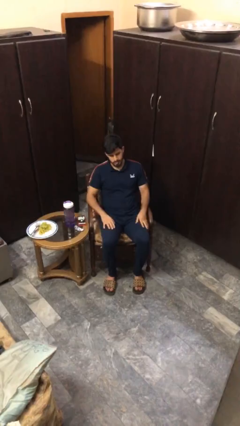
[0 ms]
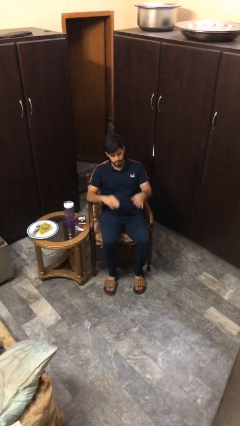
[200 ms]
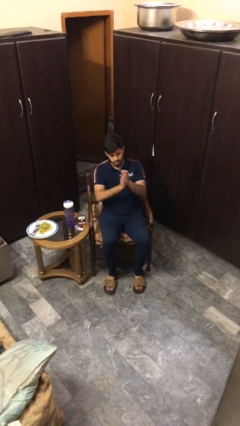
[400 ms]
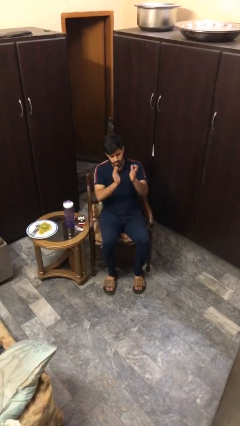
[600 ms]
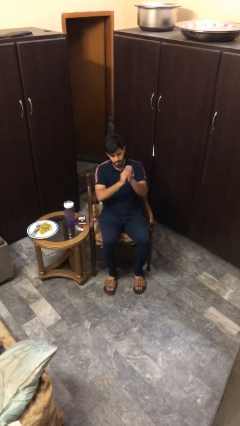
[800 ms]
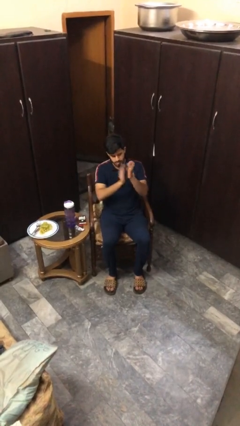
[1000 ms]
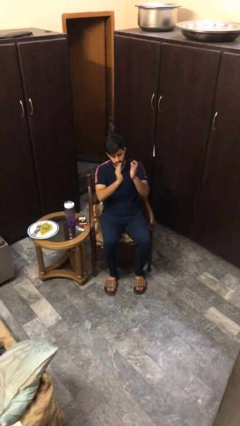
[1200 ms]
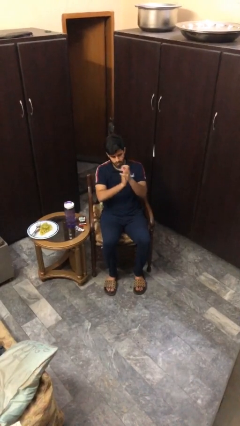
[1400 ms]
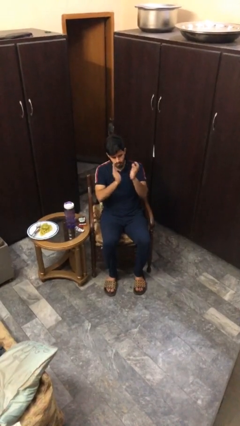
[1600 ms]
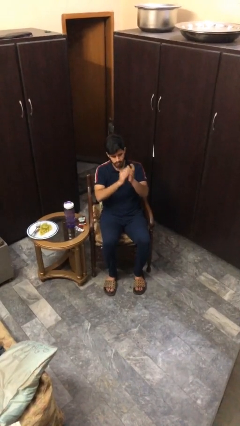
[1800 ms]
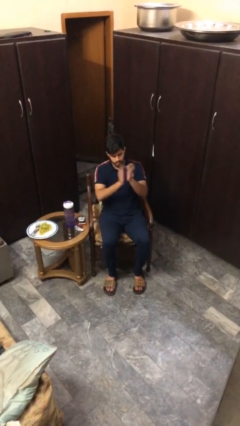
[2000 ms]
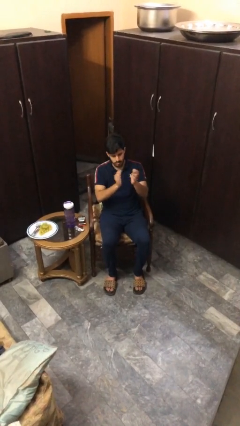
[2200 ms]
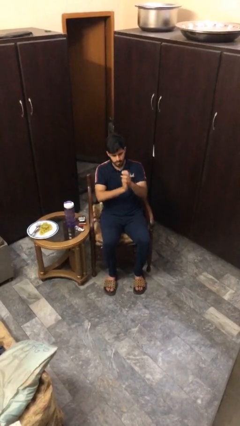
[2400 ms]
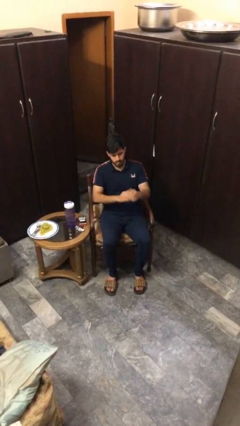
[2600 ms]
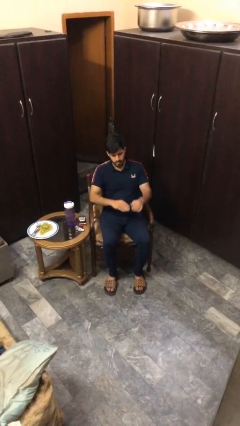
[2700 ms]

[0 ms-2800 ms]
person claps hands

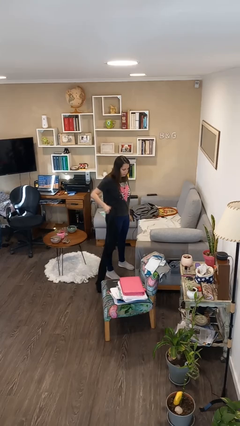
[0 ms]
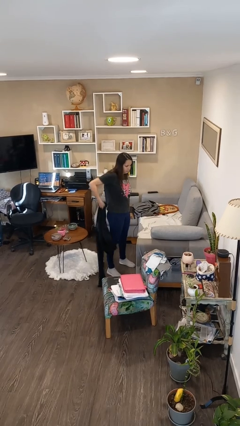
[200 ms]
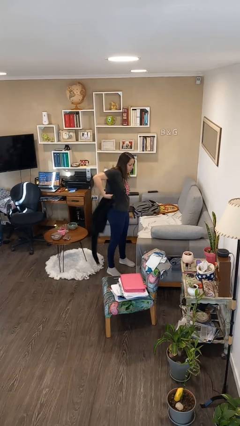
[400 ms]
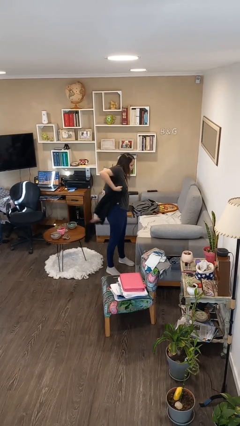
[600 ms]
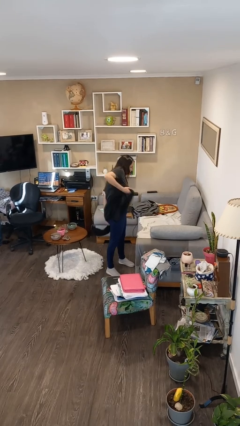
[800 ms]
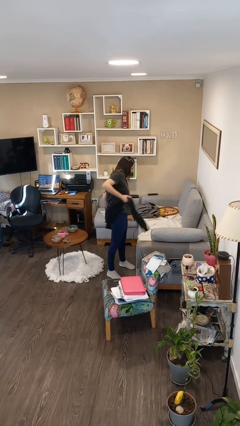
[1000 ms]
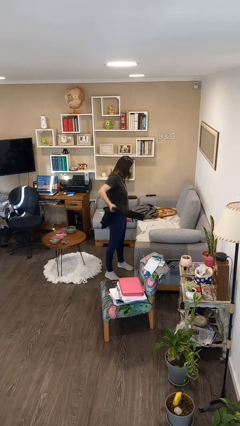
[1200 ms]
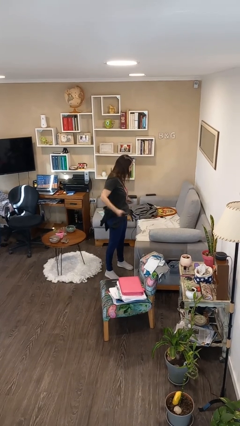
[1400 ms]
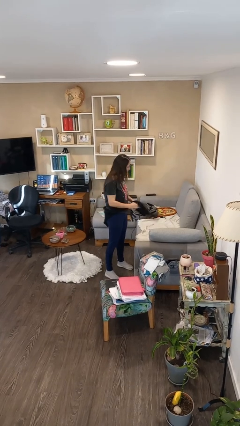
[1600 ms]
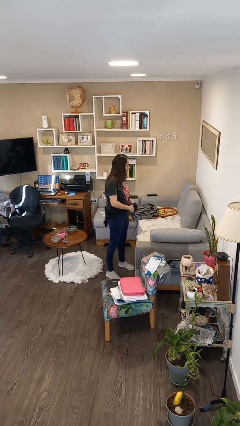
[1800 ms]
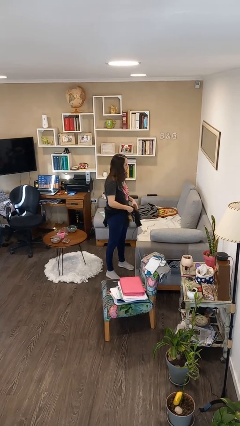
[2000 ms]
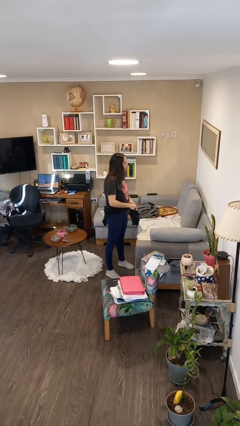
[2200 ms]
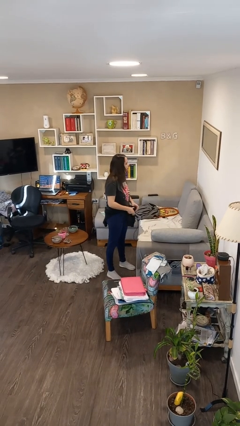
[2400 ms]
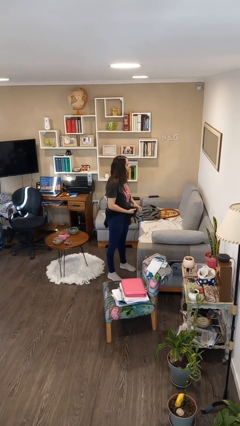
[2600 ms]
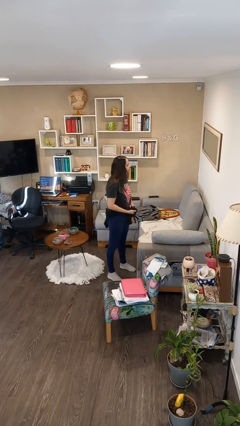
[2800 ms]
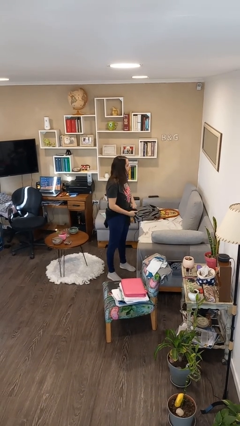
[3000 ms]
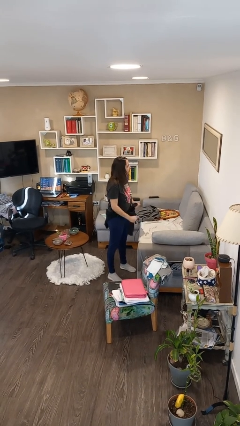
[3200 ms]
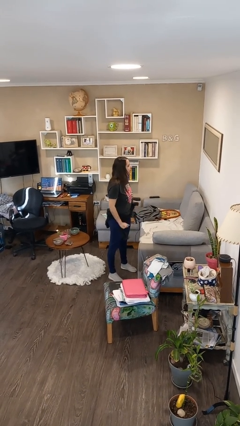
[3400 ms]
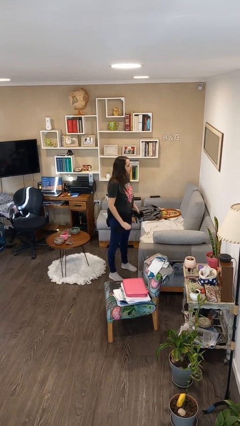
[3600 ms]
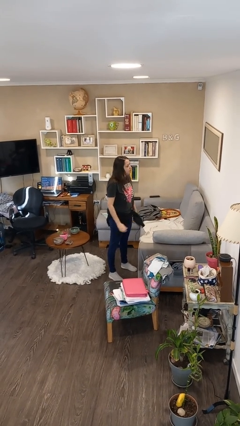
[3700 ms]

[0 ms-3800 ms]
person ties jacket around waist

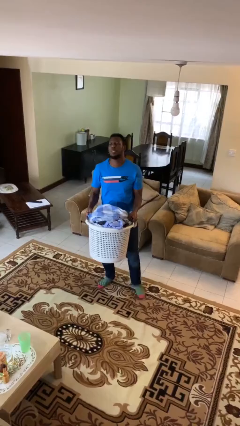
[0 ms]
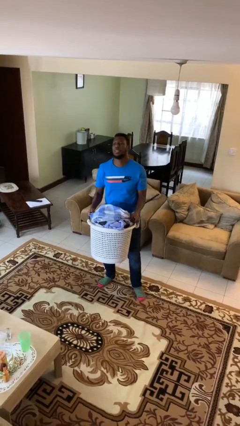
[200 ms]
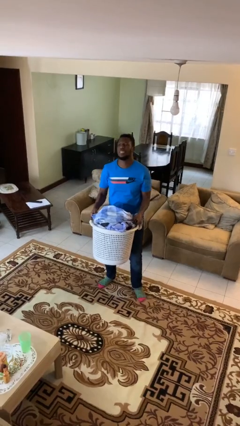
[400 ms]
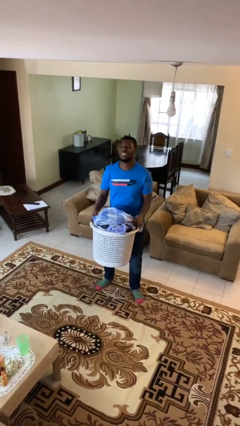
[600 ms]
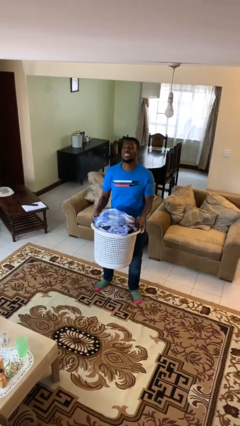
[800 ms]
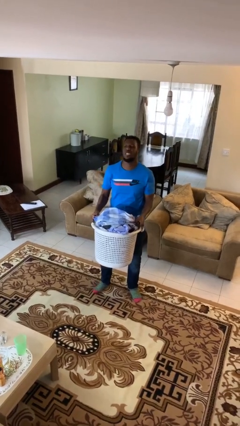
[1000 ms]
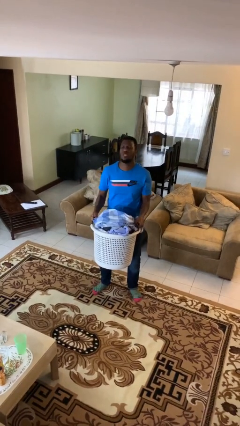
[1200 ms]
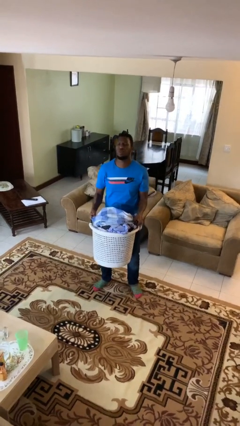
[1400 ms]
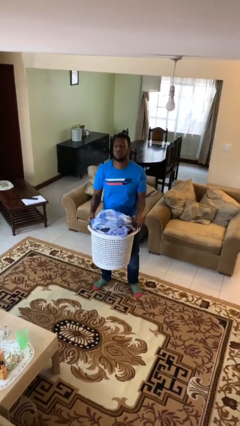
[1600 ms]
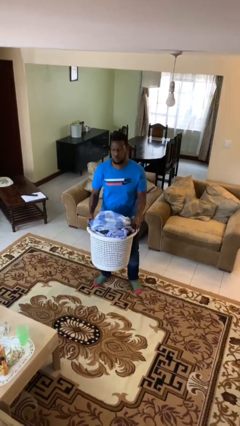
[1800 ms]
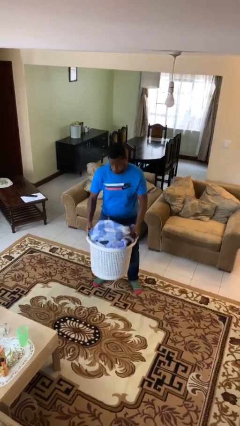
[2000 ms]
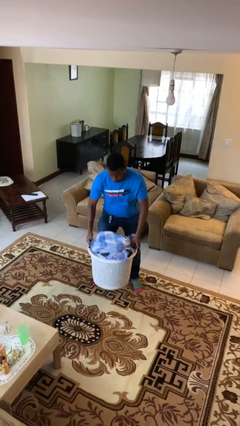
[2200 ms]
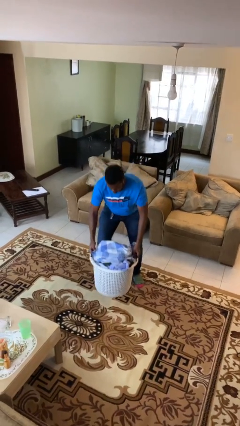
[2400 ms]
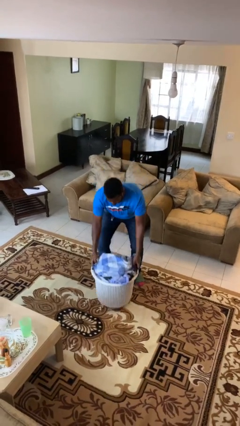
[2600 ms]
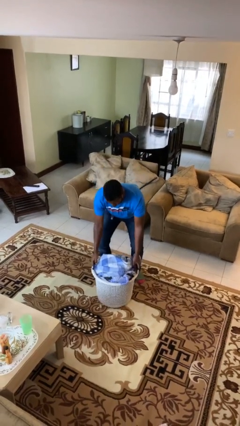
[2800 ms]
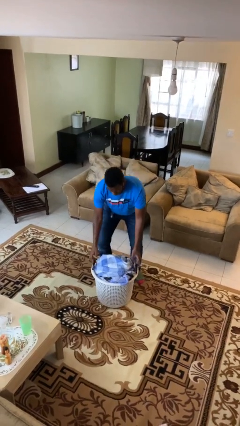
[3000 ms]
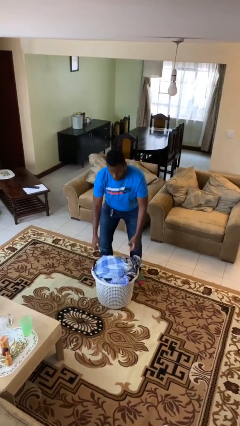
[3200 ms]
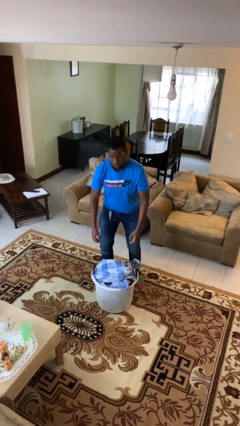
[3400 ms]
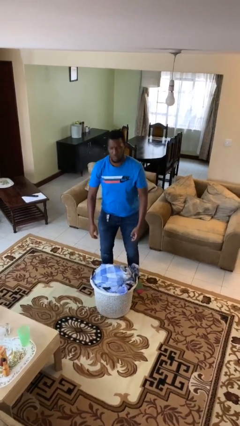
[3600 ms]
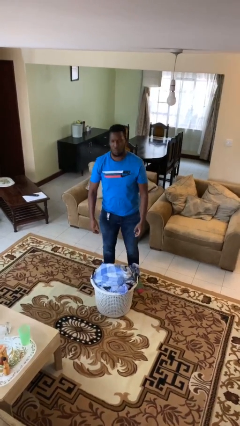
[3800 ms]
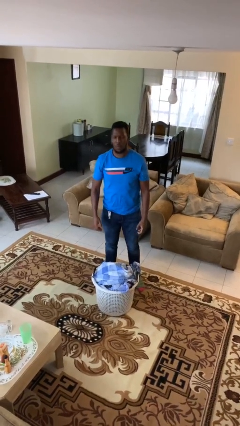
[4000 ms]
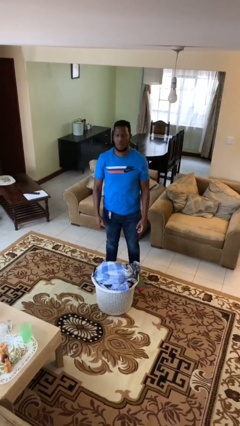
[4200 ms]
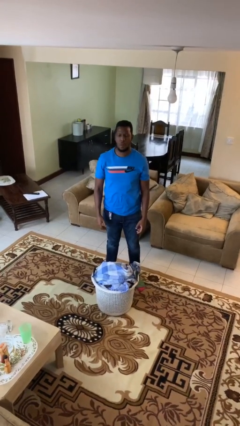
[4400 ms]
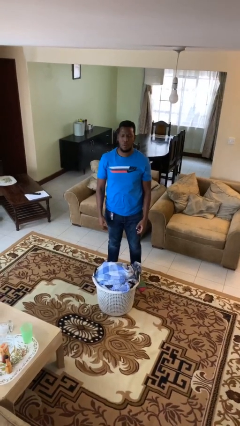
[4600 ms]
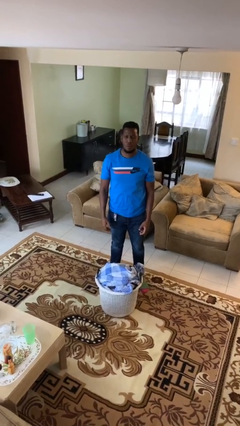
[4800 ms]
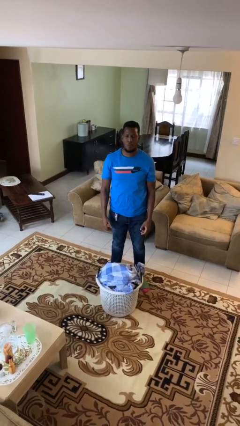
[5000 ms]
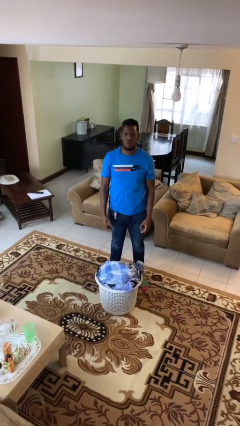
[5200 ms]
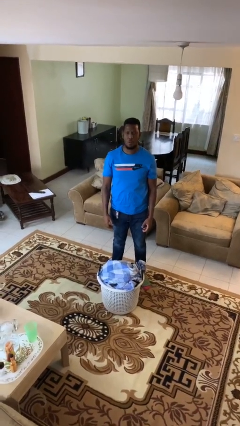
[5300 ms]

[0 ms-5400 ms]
person puts down object on floor

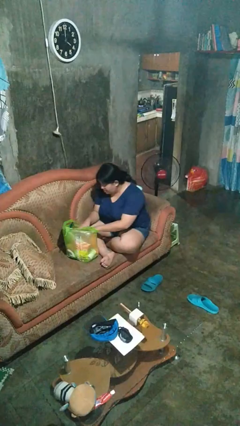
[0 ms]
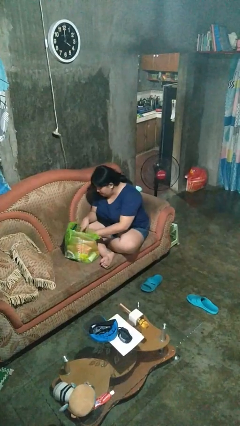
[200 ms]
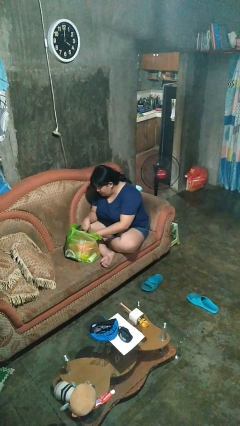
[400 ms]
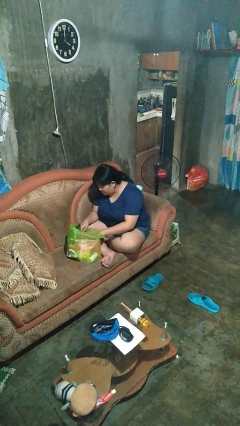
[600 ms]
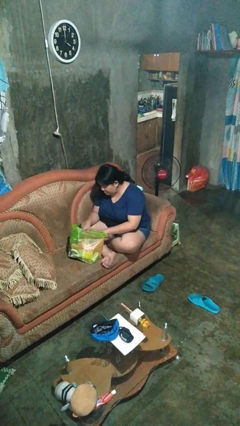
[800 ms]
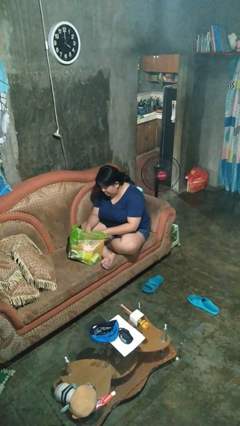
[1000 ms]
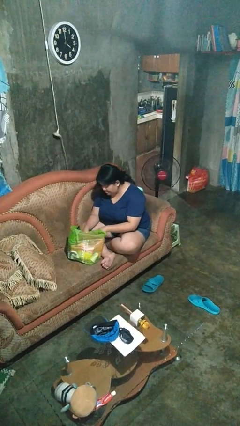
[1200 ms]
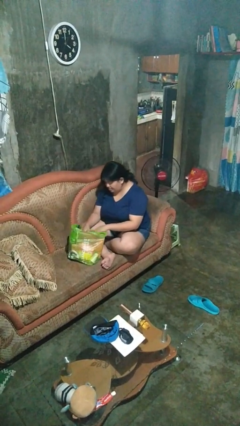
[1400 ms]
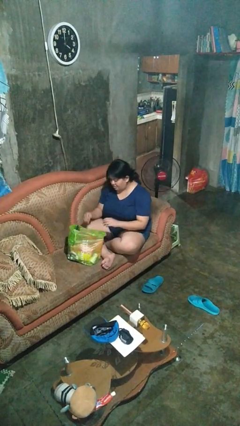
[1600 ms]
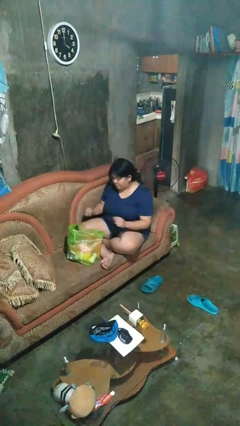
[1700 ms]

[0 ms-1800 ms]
person searches in bag

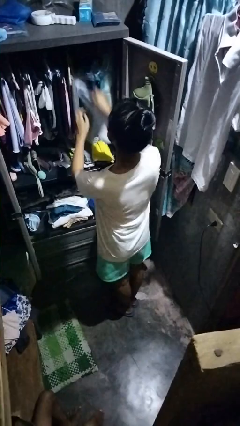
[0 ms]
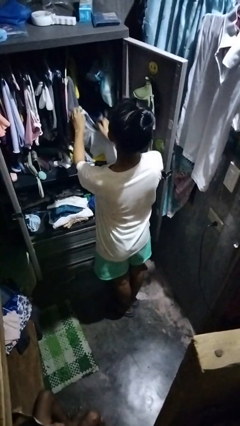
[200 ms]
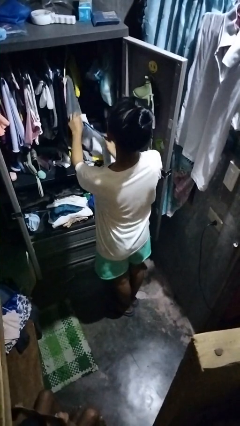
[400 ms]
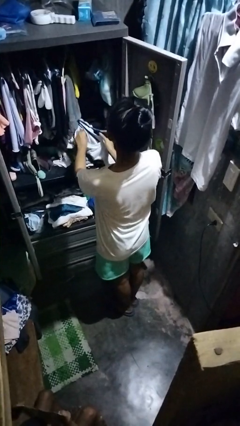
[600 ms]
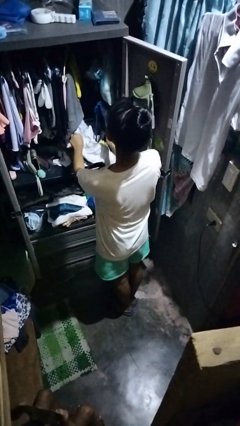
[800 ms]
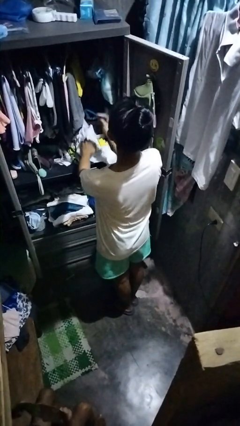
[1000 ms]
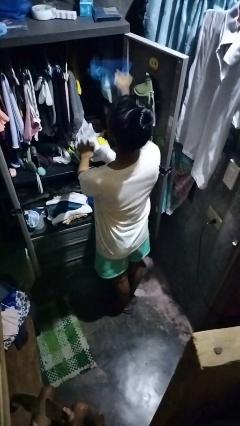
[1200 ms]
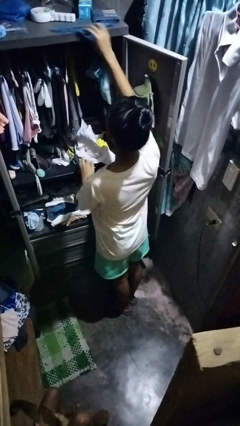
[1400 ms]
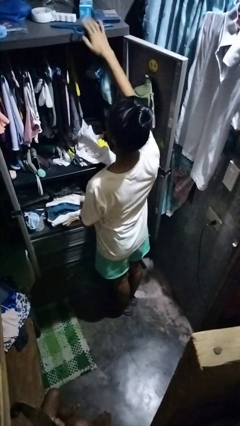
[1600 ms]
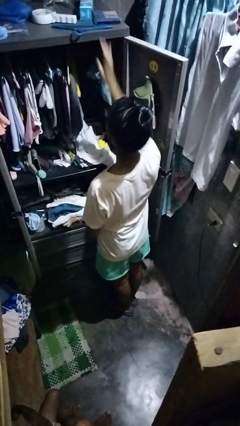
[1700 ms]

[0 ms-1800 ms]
person takes clothes from closet

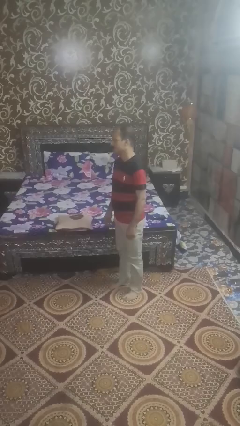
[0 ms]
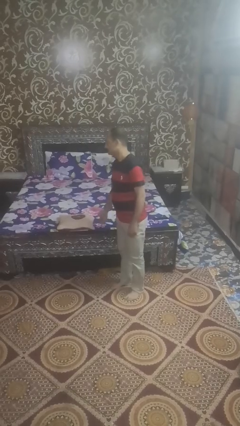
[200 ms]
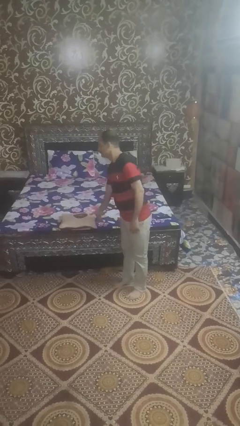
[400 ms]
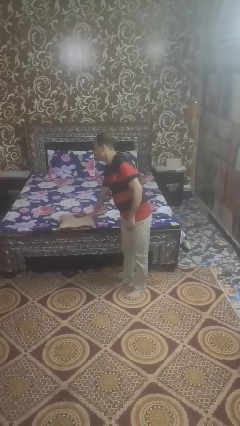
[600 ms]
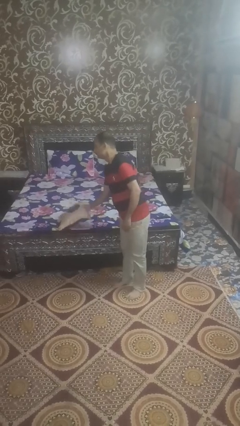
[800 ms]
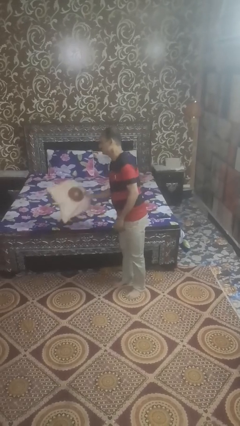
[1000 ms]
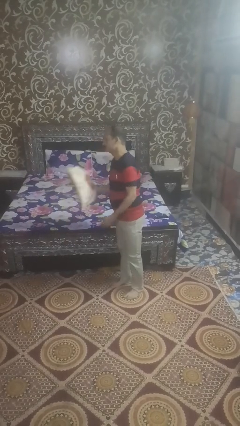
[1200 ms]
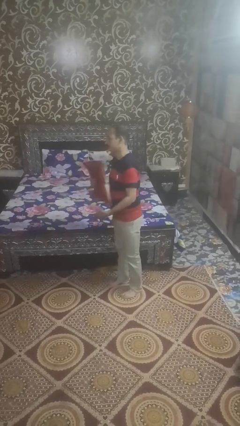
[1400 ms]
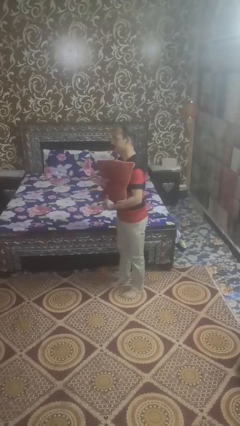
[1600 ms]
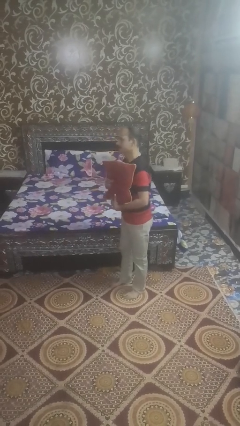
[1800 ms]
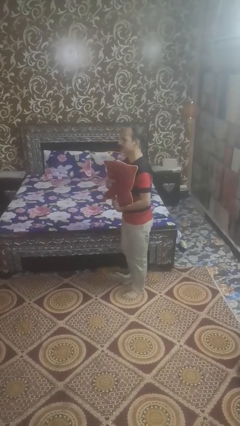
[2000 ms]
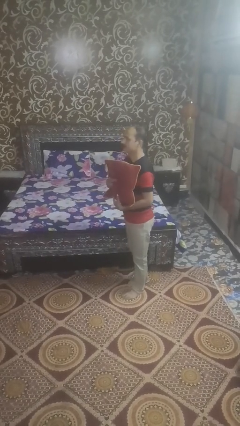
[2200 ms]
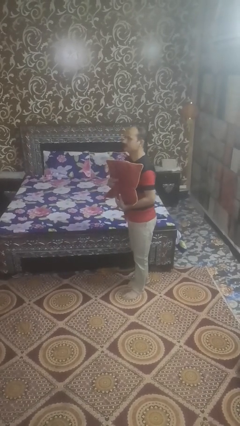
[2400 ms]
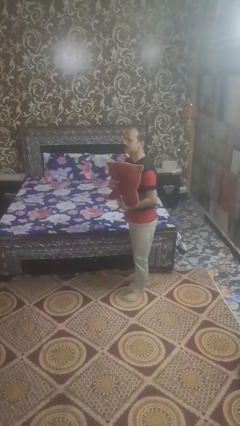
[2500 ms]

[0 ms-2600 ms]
person picks up object from bed
